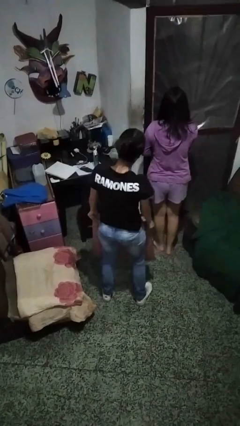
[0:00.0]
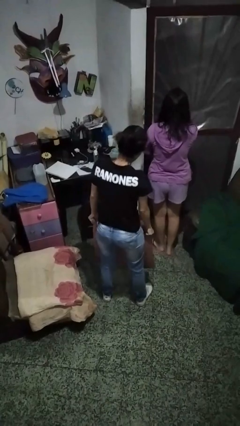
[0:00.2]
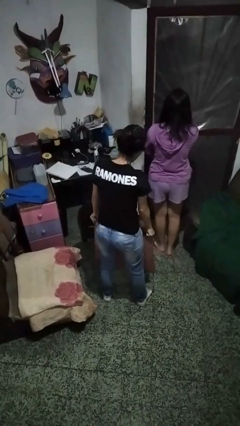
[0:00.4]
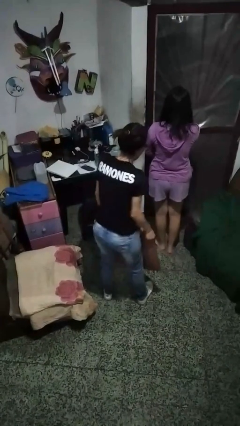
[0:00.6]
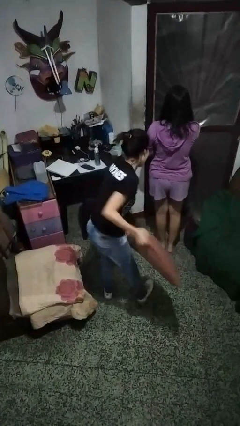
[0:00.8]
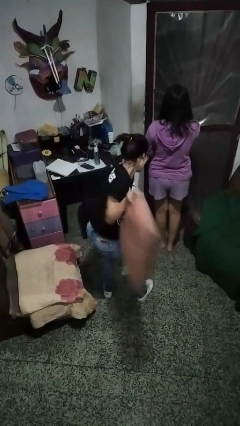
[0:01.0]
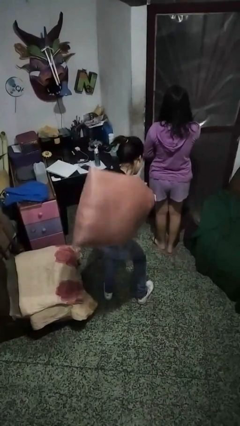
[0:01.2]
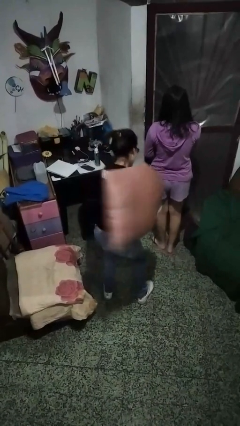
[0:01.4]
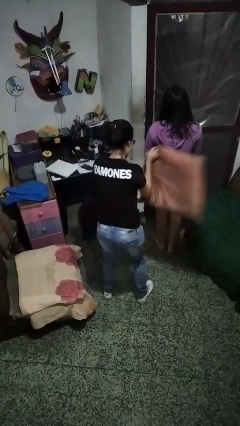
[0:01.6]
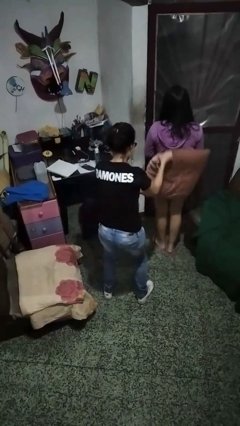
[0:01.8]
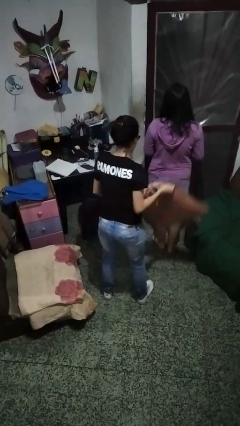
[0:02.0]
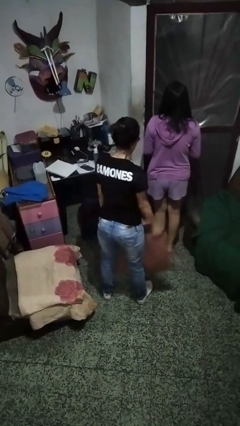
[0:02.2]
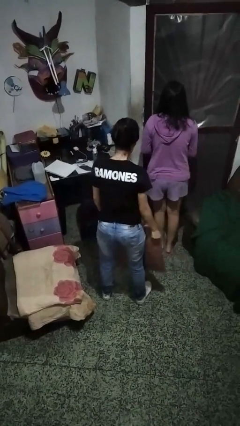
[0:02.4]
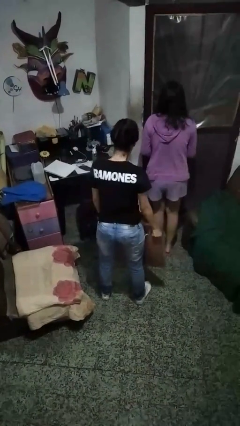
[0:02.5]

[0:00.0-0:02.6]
person hits person with pillow

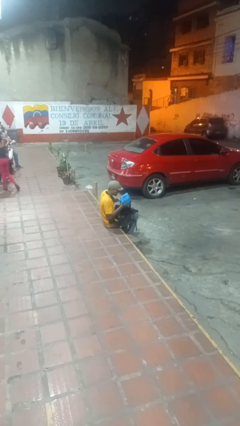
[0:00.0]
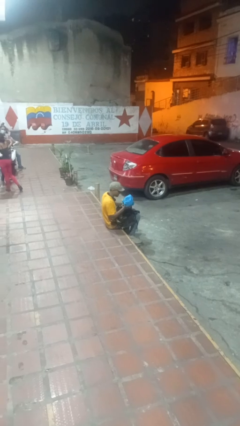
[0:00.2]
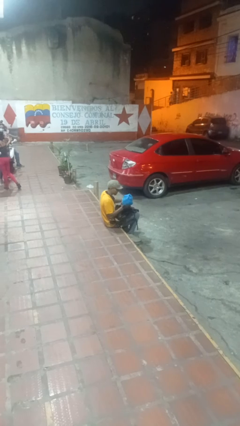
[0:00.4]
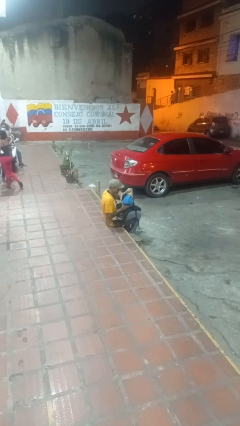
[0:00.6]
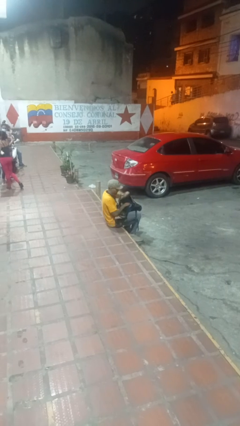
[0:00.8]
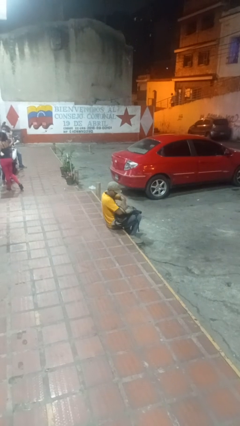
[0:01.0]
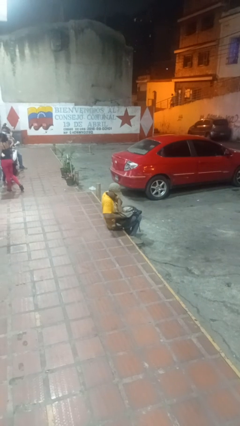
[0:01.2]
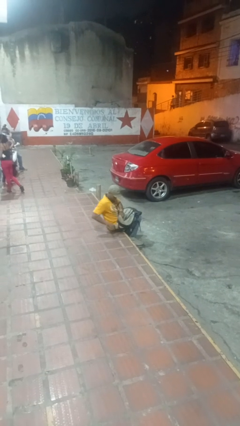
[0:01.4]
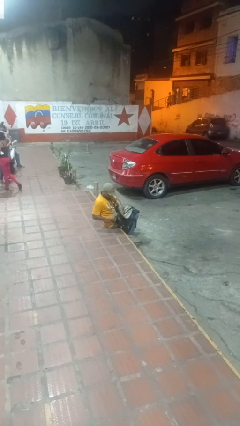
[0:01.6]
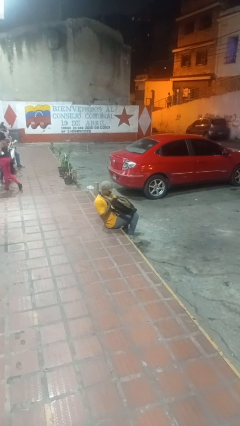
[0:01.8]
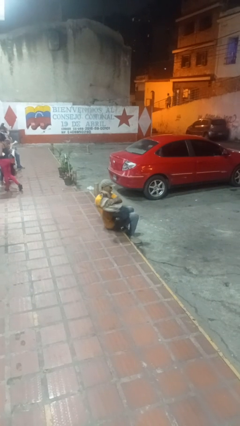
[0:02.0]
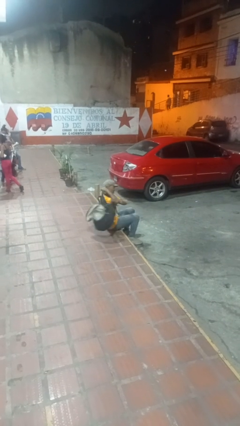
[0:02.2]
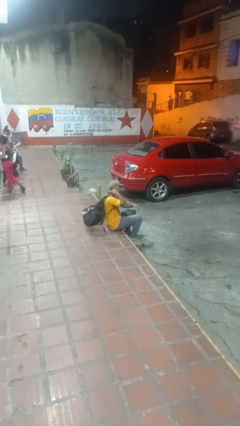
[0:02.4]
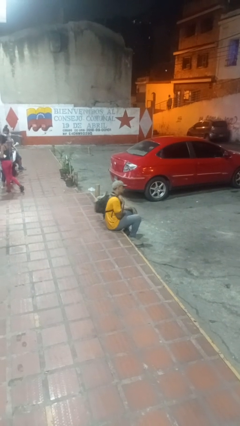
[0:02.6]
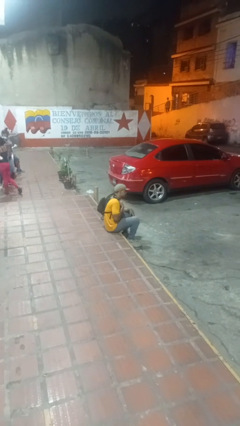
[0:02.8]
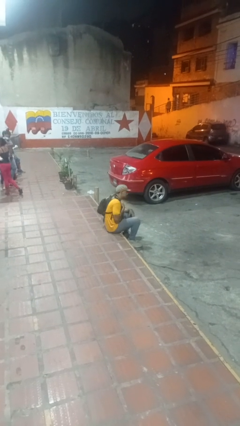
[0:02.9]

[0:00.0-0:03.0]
person puts object into backpack

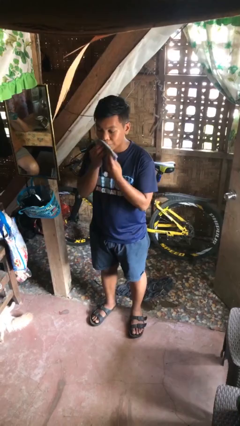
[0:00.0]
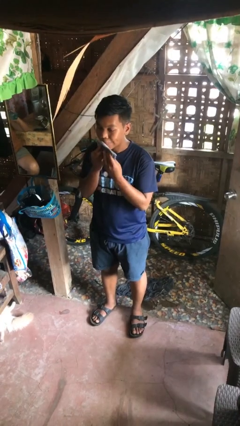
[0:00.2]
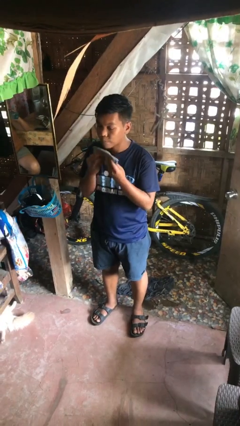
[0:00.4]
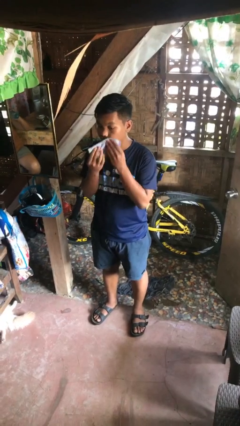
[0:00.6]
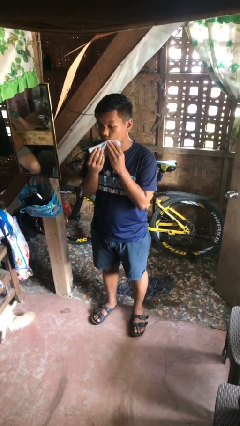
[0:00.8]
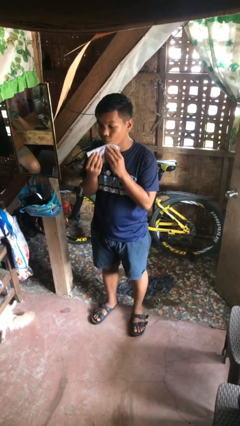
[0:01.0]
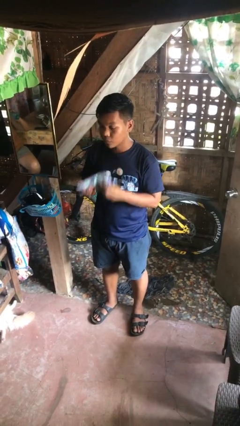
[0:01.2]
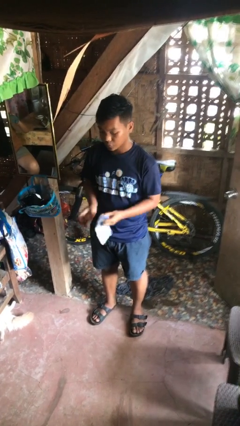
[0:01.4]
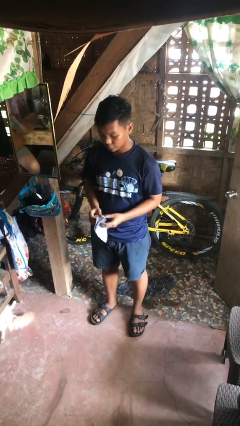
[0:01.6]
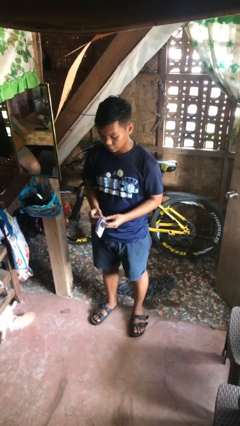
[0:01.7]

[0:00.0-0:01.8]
person wipes mouth with napkin

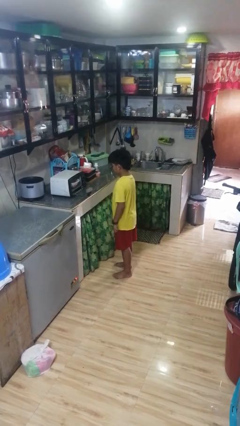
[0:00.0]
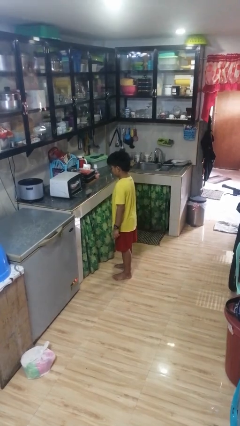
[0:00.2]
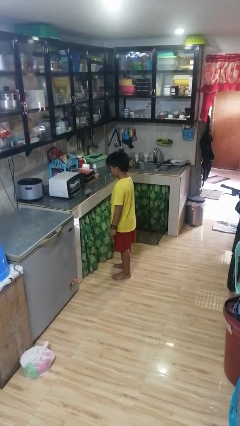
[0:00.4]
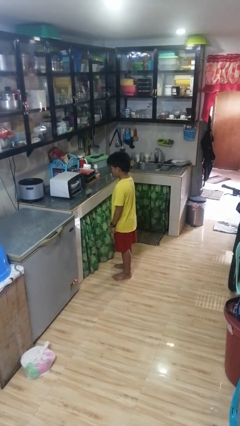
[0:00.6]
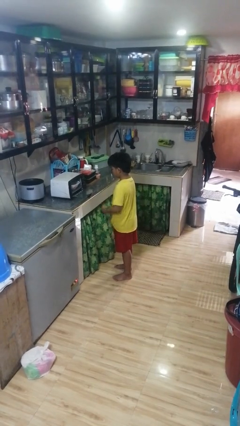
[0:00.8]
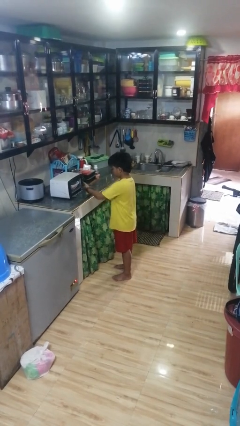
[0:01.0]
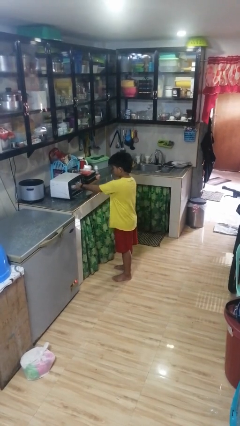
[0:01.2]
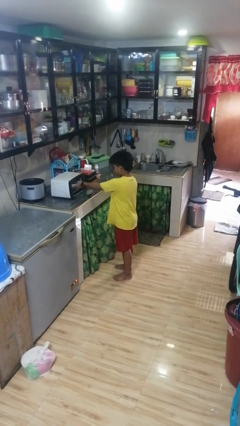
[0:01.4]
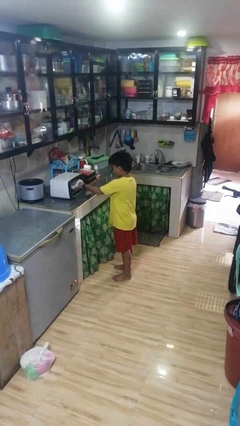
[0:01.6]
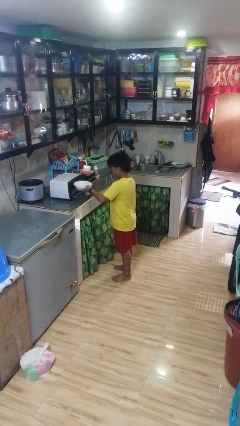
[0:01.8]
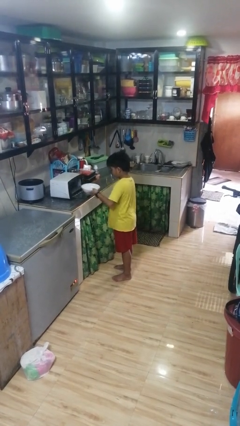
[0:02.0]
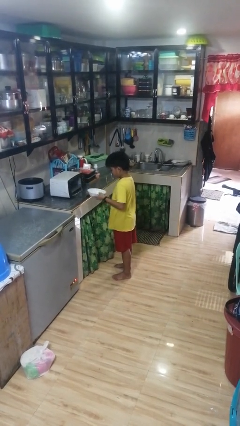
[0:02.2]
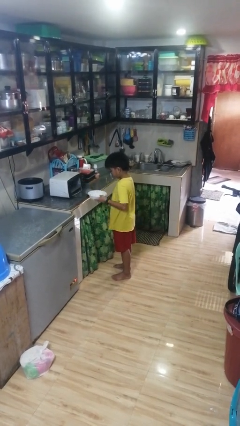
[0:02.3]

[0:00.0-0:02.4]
person takes object from microwave

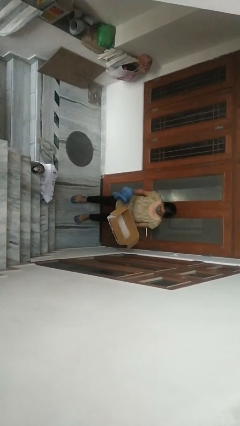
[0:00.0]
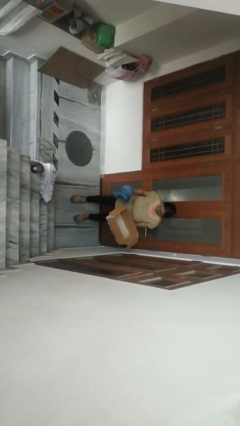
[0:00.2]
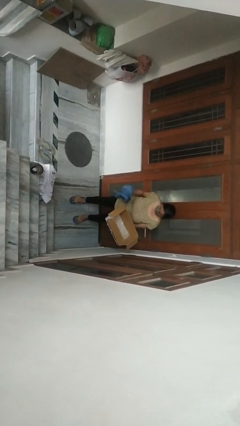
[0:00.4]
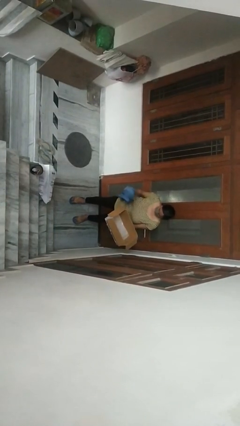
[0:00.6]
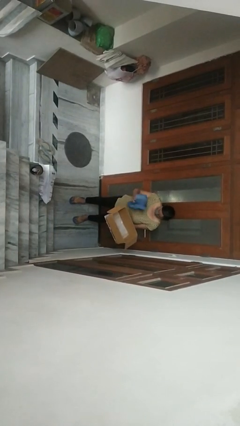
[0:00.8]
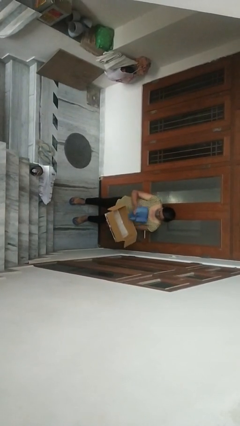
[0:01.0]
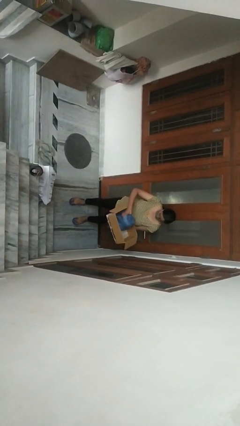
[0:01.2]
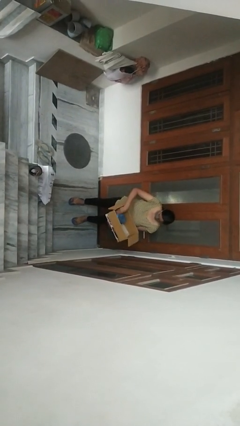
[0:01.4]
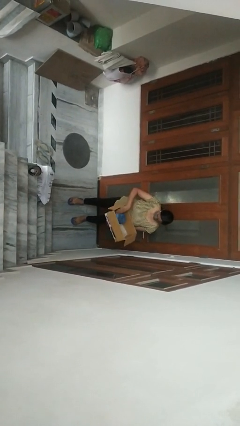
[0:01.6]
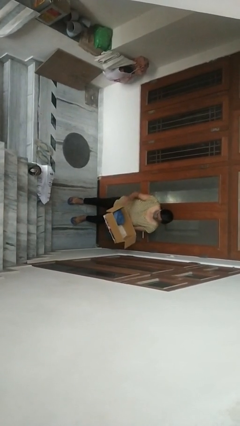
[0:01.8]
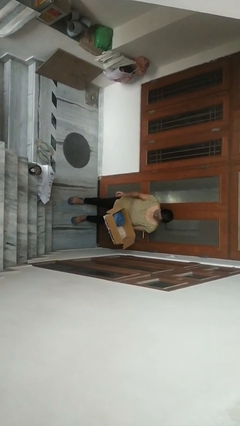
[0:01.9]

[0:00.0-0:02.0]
person puts object into box

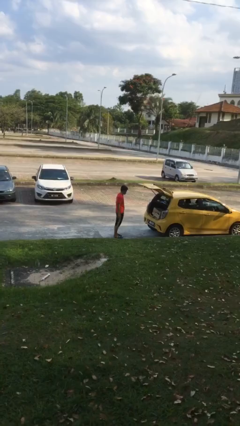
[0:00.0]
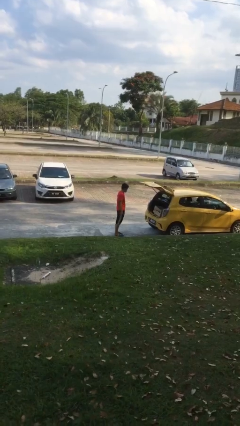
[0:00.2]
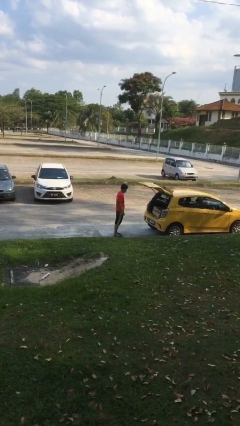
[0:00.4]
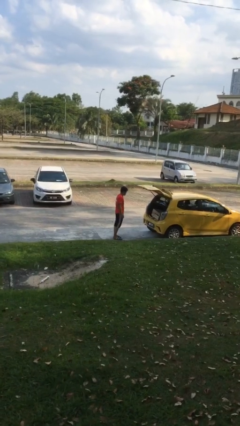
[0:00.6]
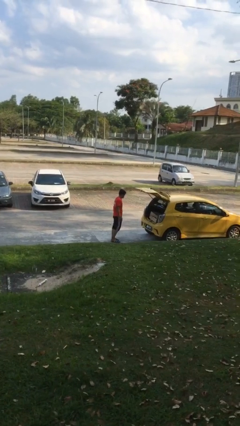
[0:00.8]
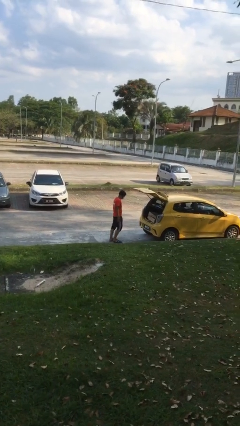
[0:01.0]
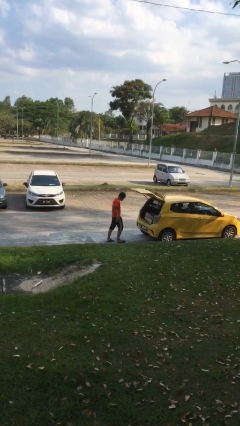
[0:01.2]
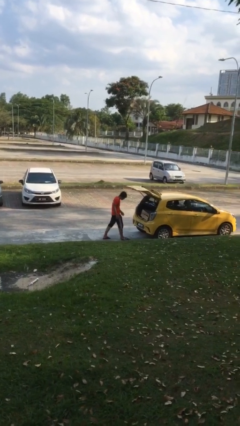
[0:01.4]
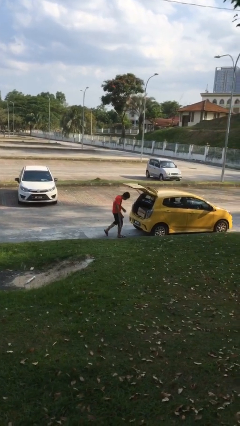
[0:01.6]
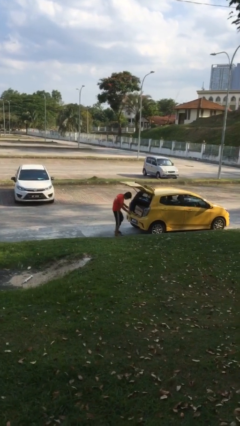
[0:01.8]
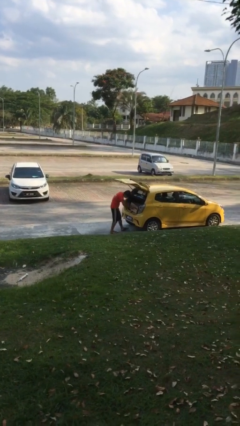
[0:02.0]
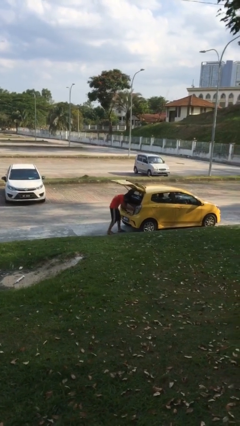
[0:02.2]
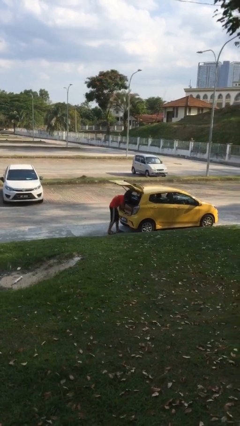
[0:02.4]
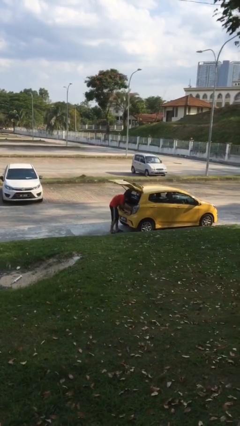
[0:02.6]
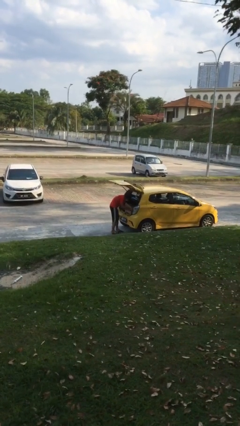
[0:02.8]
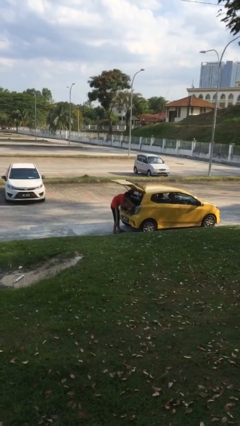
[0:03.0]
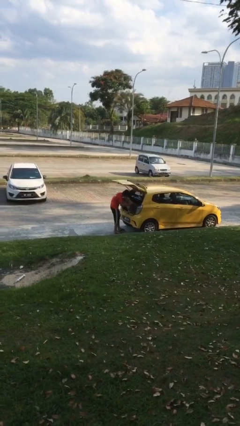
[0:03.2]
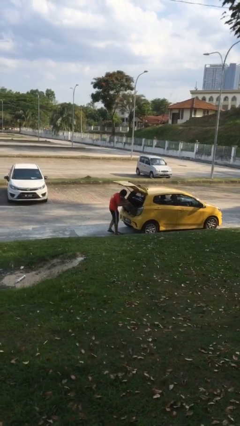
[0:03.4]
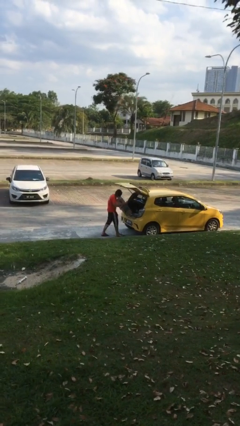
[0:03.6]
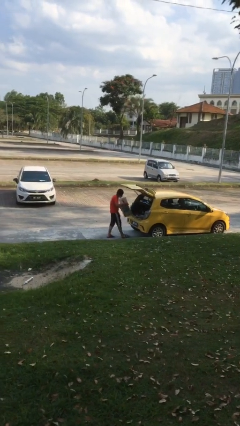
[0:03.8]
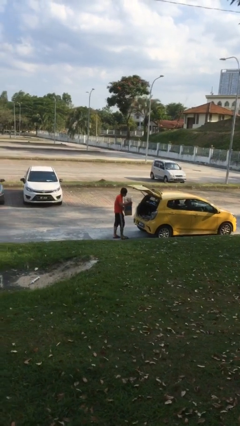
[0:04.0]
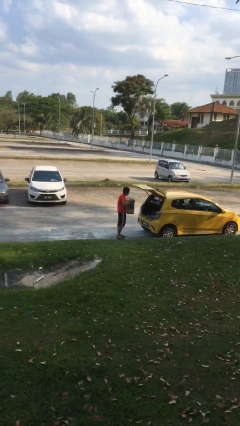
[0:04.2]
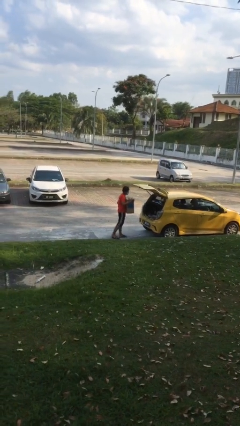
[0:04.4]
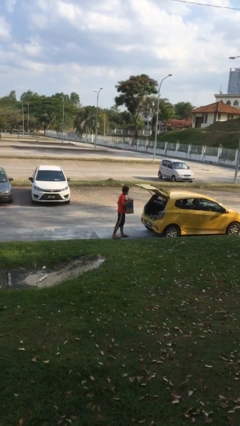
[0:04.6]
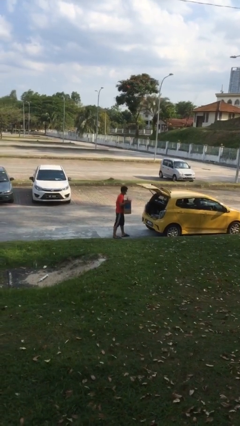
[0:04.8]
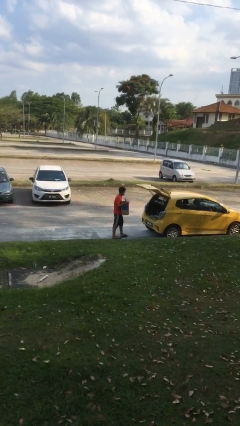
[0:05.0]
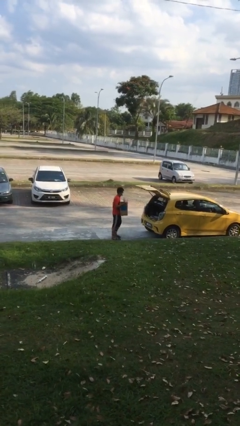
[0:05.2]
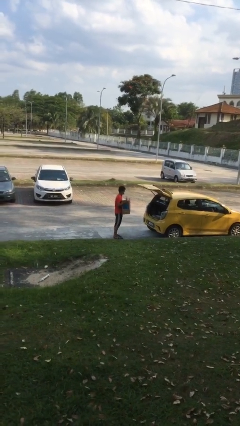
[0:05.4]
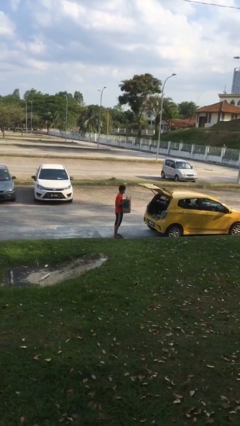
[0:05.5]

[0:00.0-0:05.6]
person unloads car
